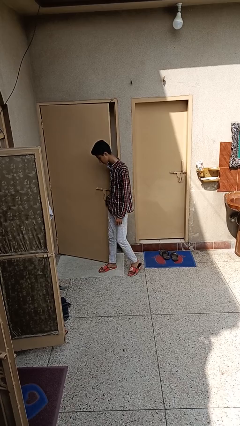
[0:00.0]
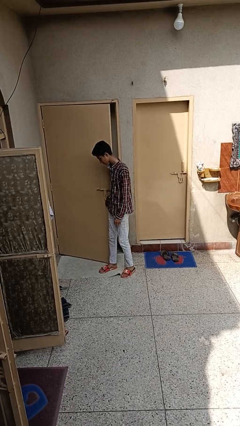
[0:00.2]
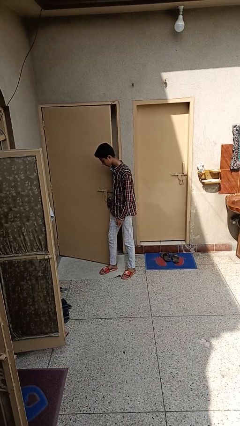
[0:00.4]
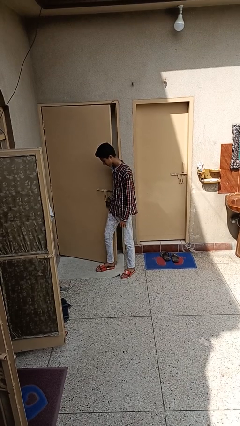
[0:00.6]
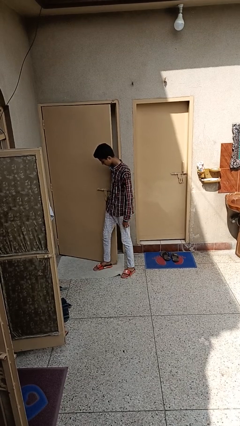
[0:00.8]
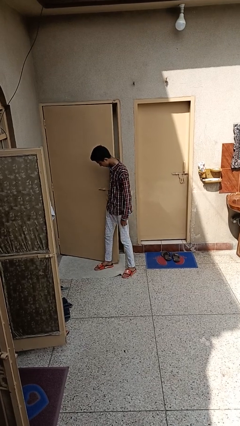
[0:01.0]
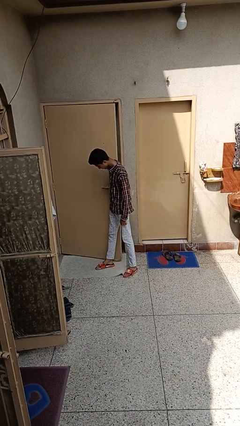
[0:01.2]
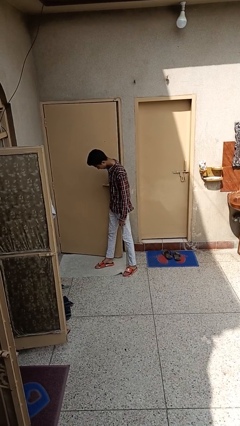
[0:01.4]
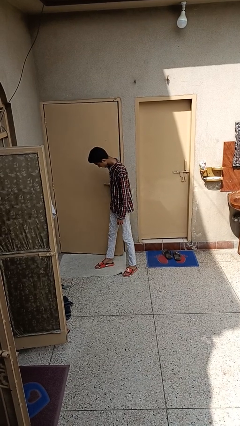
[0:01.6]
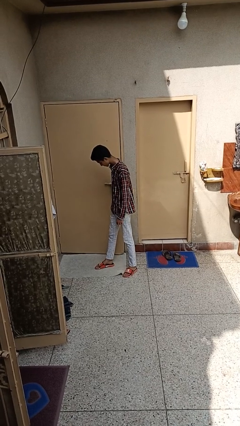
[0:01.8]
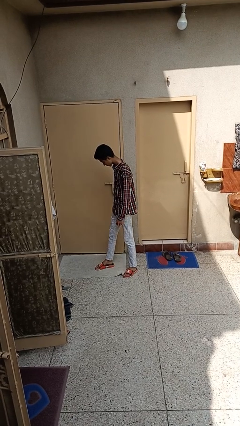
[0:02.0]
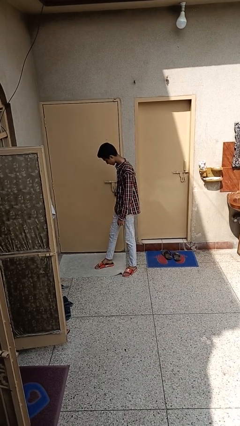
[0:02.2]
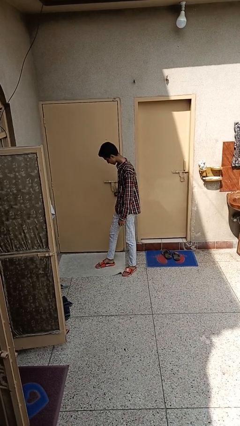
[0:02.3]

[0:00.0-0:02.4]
person closes door with hip

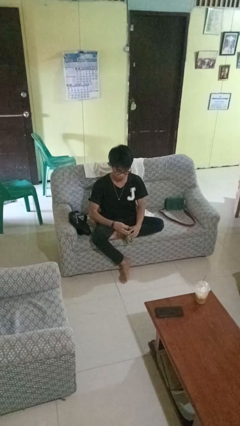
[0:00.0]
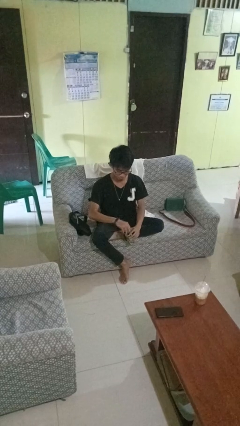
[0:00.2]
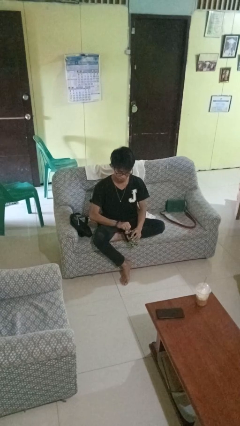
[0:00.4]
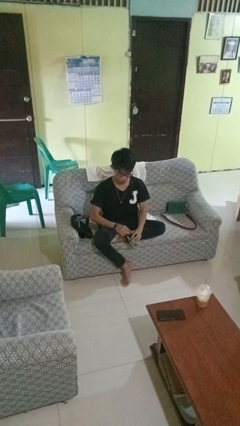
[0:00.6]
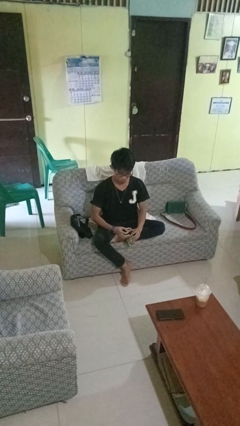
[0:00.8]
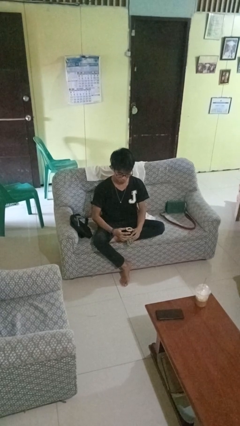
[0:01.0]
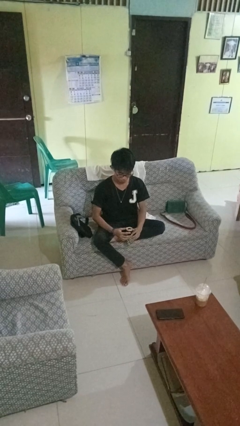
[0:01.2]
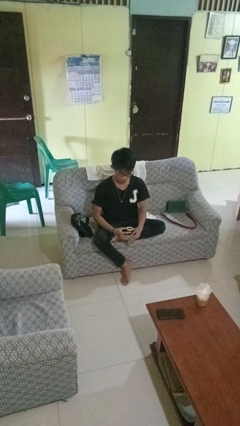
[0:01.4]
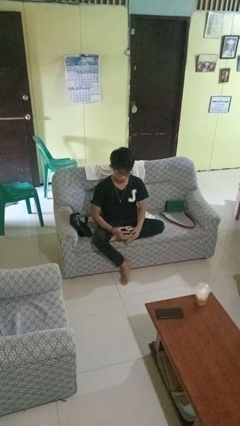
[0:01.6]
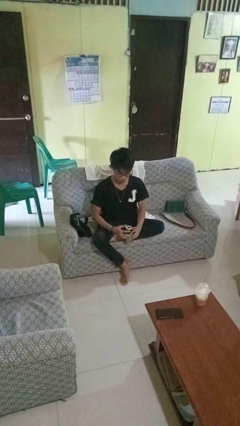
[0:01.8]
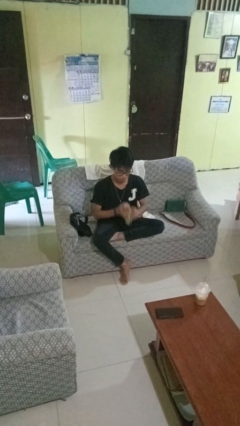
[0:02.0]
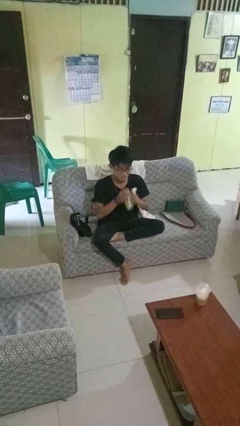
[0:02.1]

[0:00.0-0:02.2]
person opens beverage can

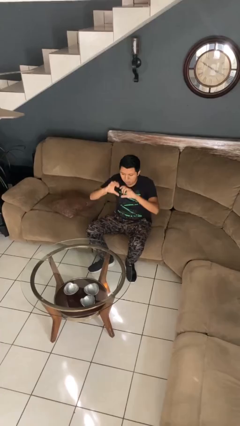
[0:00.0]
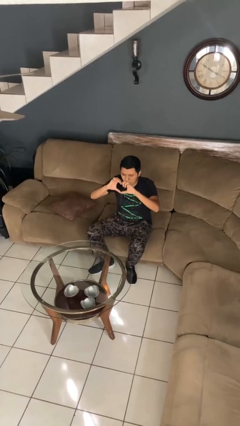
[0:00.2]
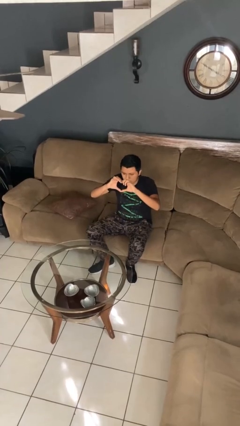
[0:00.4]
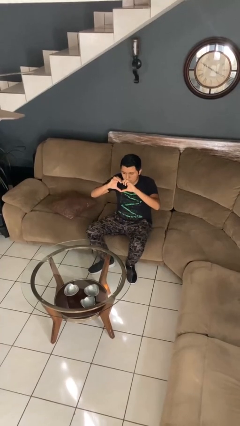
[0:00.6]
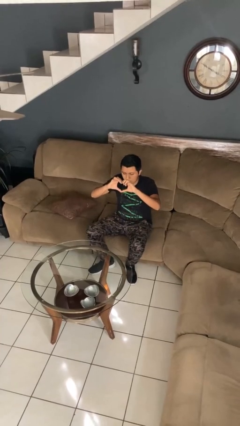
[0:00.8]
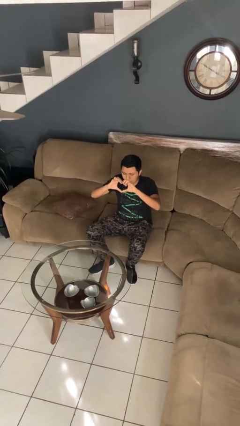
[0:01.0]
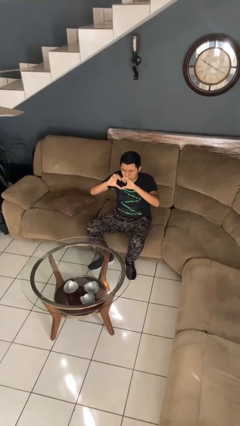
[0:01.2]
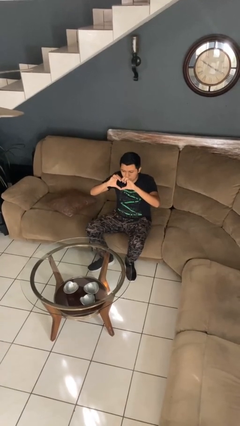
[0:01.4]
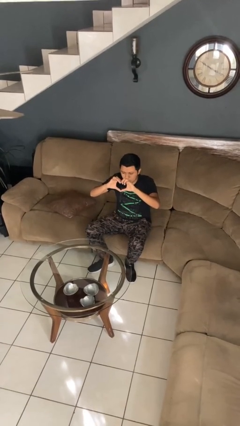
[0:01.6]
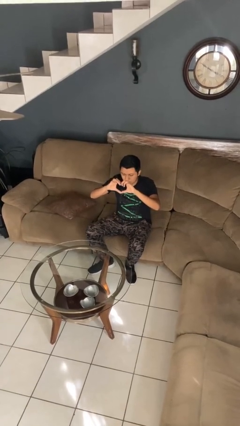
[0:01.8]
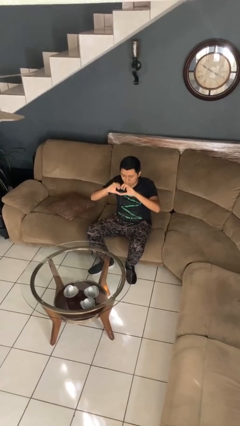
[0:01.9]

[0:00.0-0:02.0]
person gestures heart

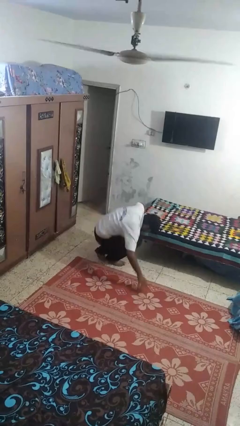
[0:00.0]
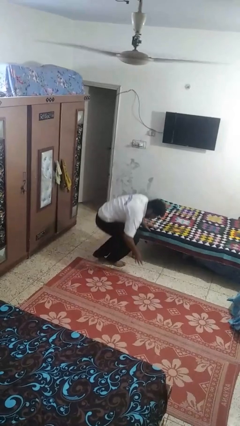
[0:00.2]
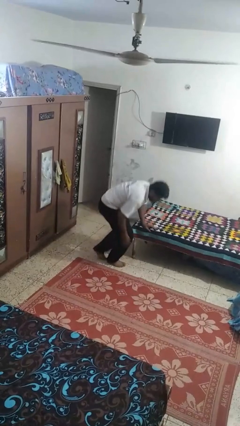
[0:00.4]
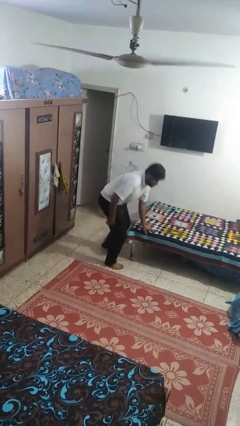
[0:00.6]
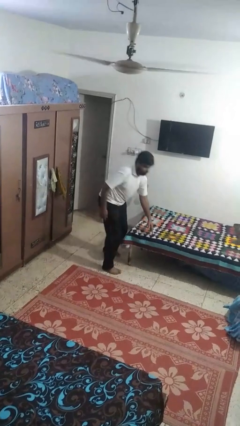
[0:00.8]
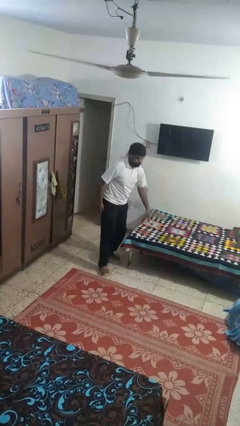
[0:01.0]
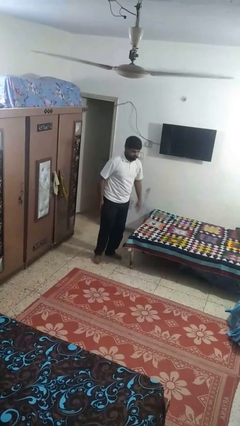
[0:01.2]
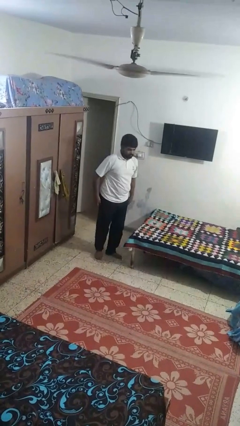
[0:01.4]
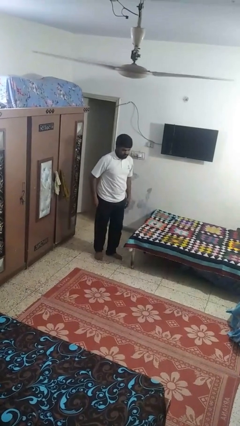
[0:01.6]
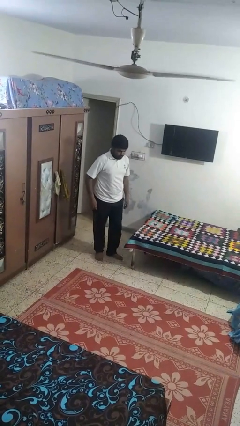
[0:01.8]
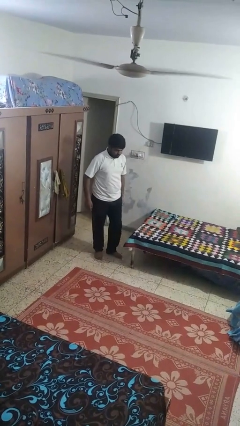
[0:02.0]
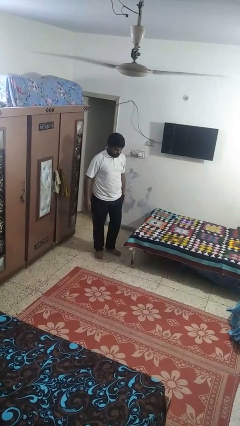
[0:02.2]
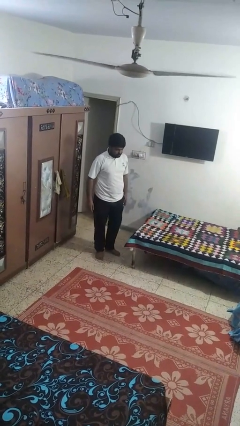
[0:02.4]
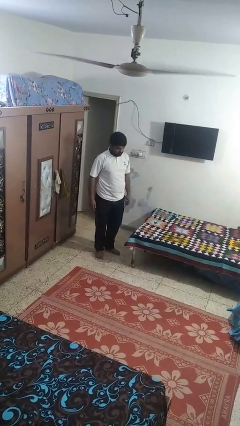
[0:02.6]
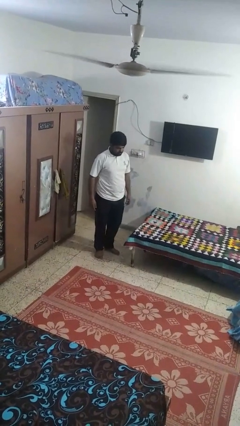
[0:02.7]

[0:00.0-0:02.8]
person stands up from floor

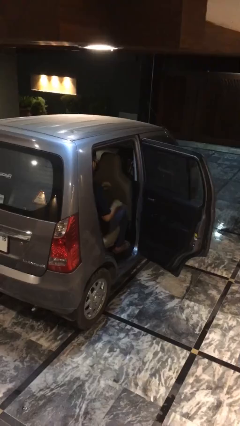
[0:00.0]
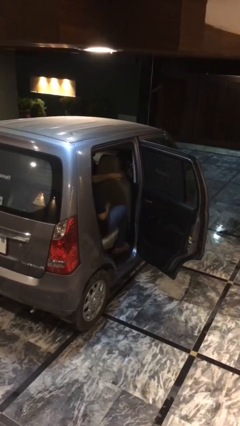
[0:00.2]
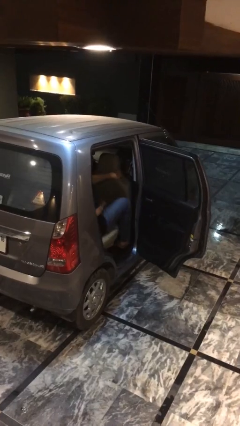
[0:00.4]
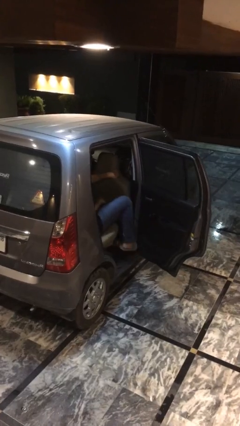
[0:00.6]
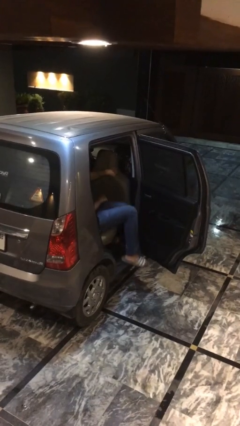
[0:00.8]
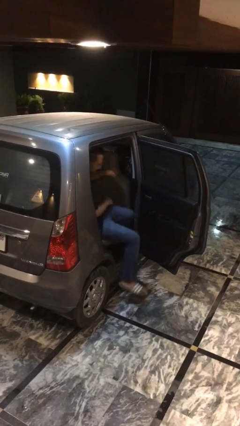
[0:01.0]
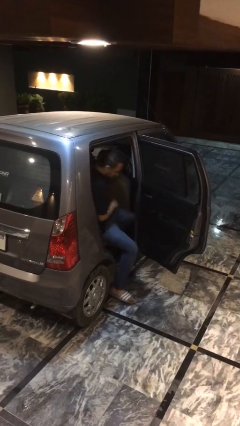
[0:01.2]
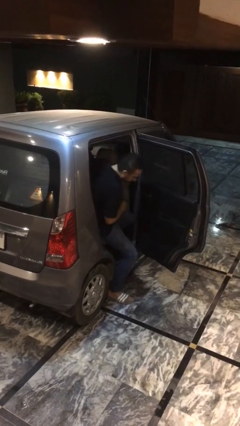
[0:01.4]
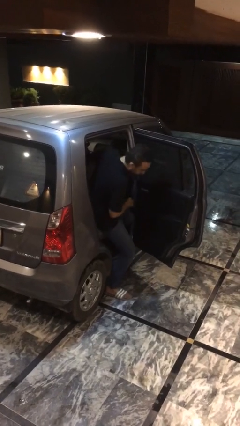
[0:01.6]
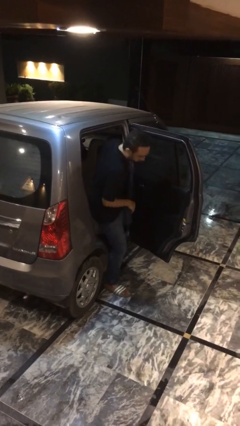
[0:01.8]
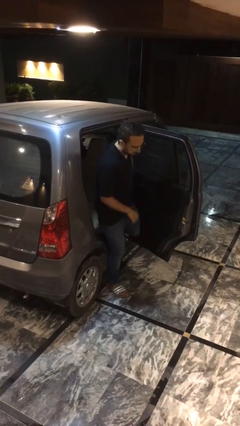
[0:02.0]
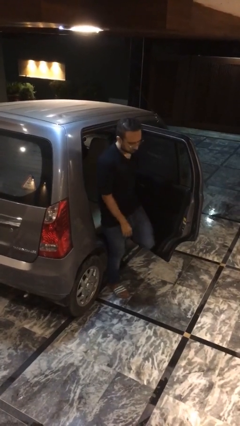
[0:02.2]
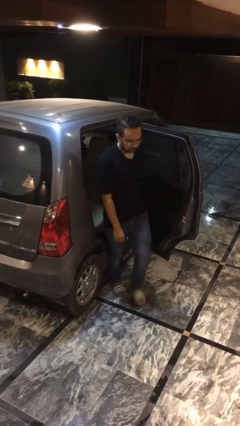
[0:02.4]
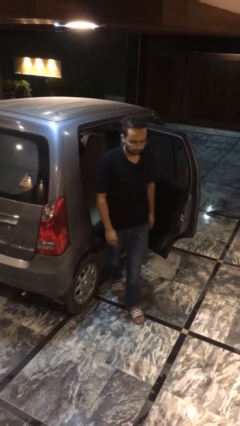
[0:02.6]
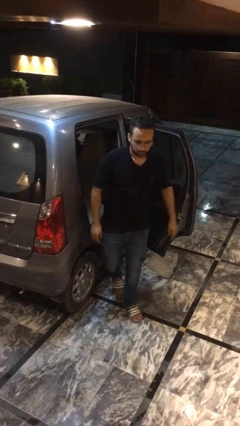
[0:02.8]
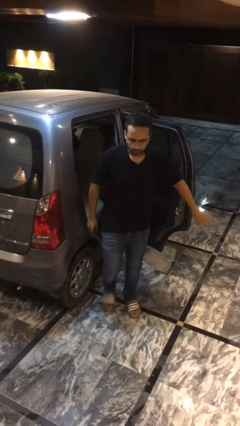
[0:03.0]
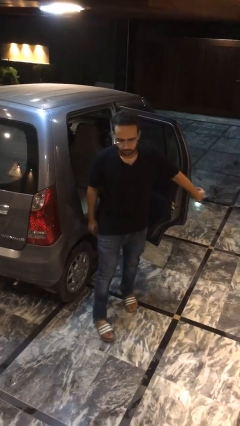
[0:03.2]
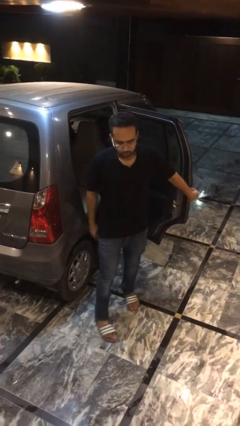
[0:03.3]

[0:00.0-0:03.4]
person exits car

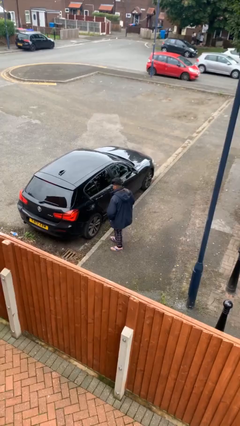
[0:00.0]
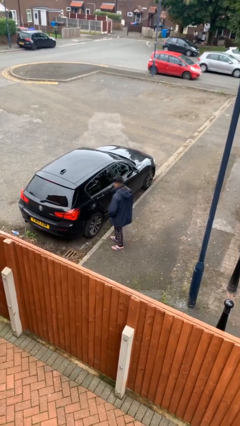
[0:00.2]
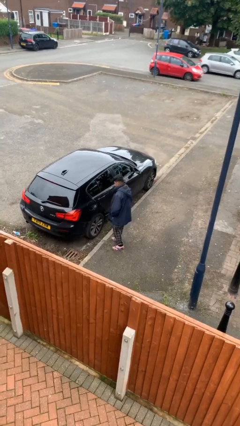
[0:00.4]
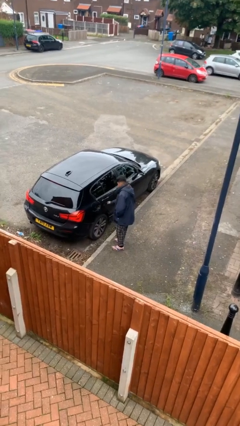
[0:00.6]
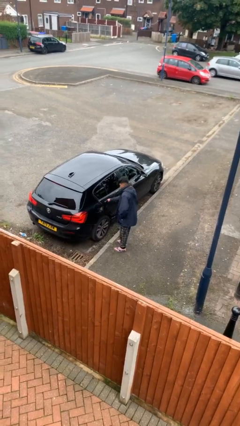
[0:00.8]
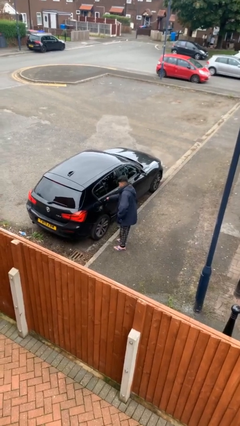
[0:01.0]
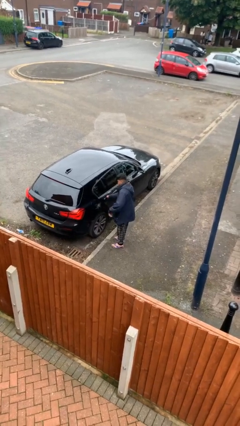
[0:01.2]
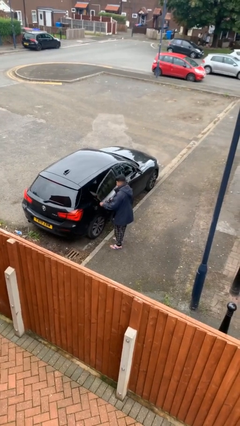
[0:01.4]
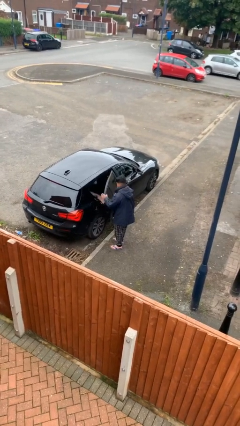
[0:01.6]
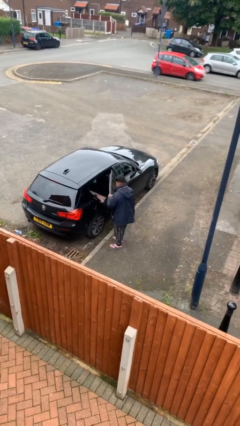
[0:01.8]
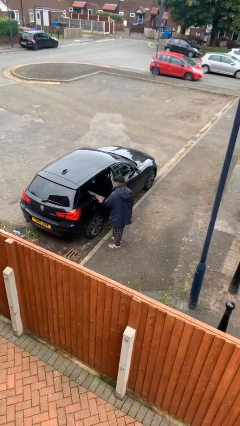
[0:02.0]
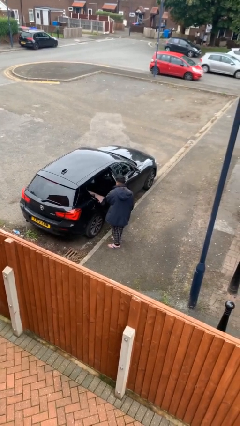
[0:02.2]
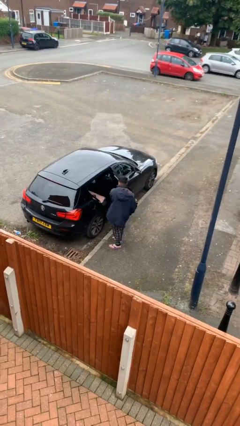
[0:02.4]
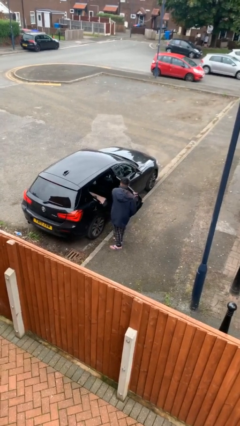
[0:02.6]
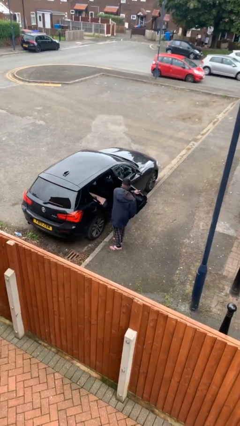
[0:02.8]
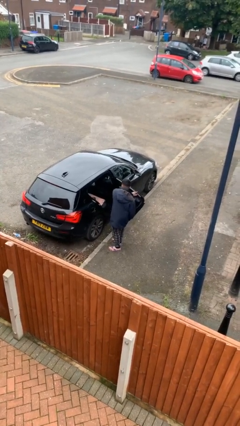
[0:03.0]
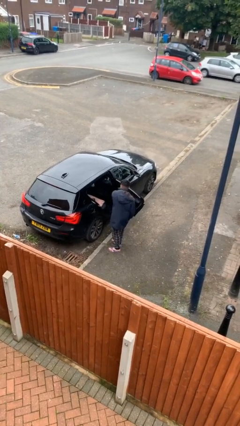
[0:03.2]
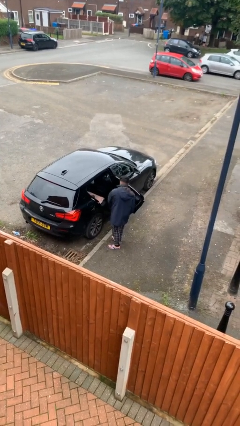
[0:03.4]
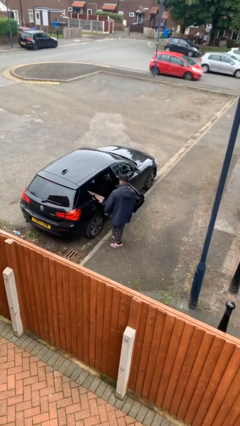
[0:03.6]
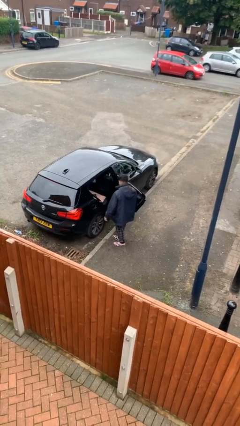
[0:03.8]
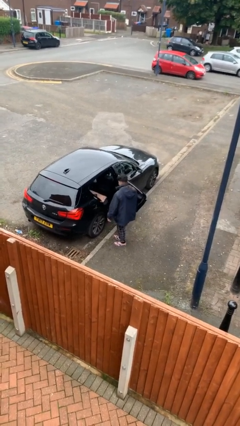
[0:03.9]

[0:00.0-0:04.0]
person opens car door

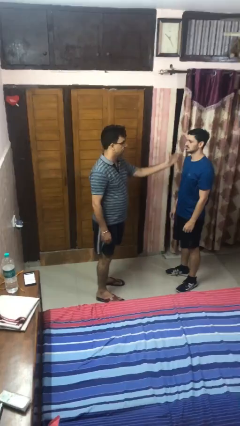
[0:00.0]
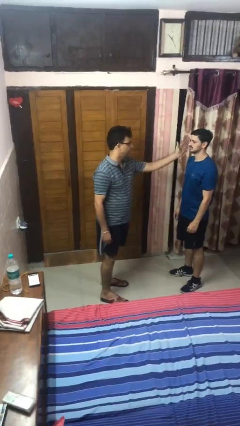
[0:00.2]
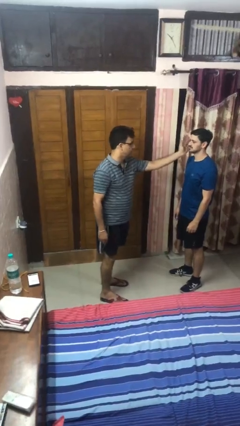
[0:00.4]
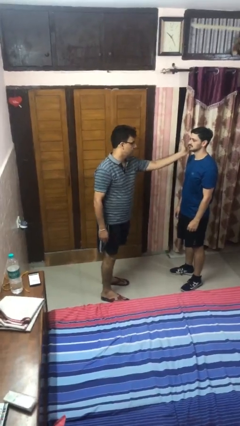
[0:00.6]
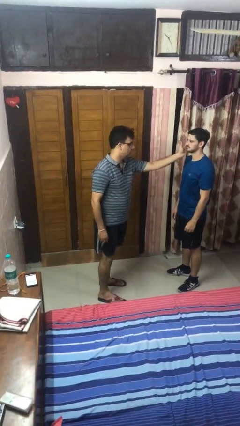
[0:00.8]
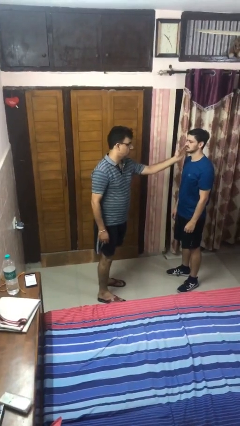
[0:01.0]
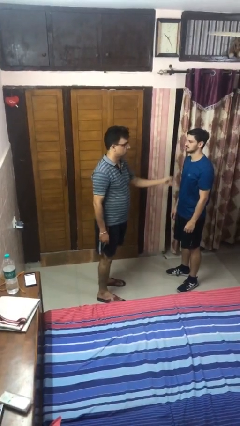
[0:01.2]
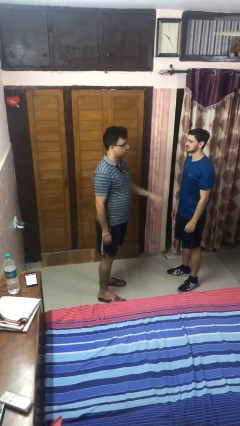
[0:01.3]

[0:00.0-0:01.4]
person touches face of person
